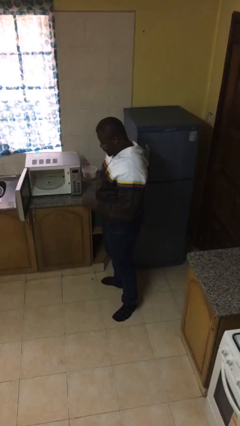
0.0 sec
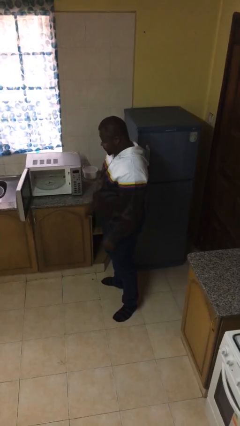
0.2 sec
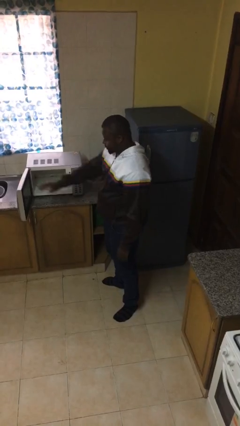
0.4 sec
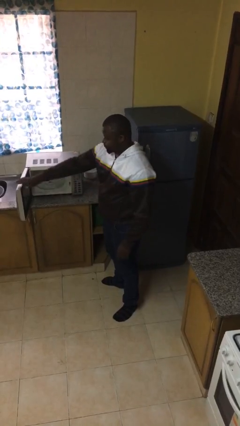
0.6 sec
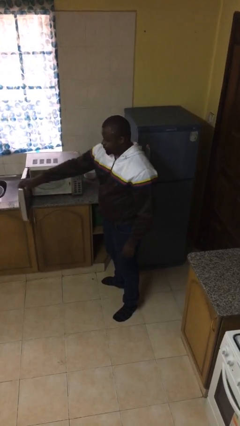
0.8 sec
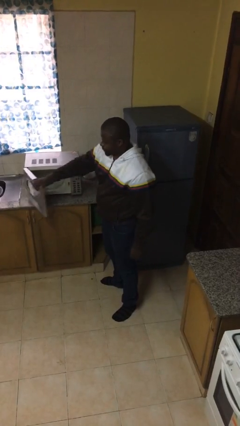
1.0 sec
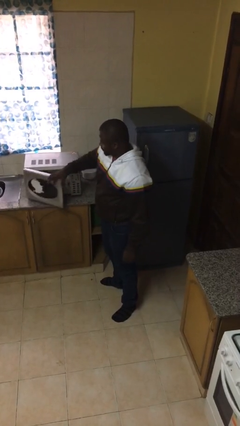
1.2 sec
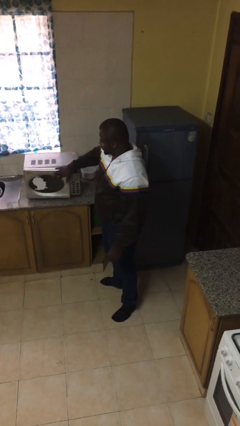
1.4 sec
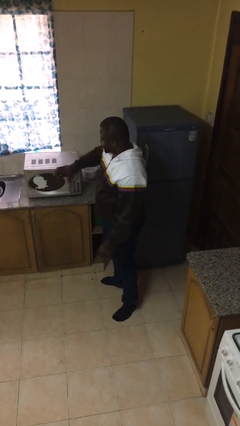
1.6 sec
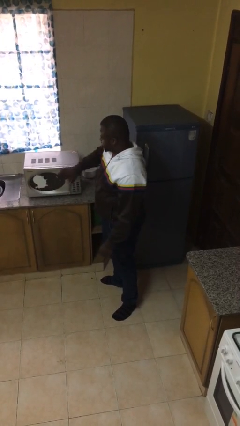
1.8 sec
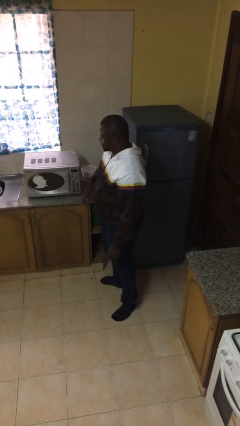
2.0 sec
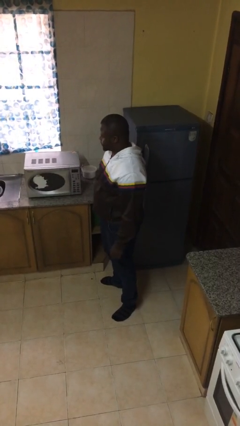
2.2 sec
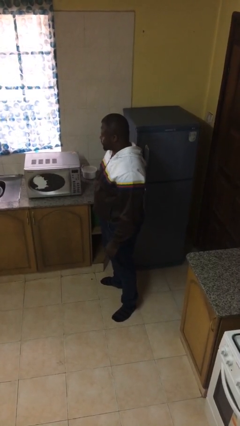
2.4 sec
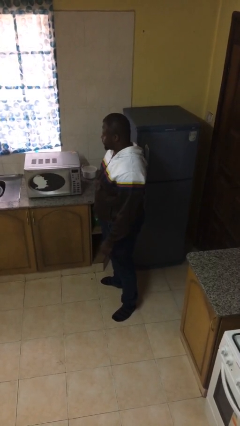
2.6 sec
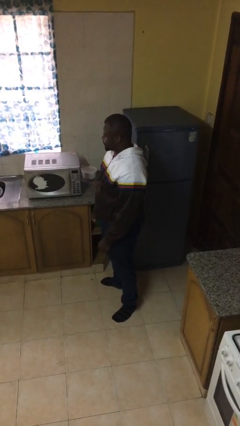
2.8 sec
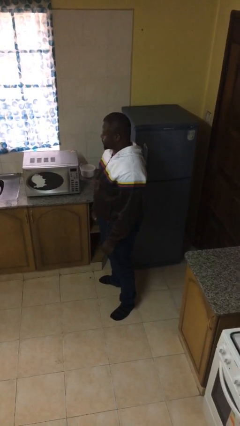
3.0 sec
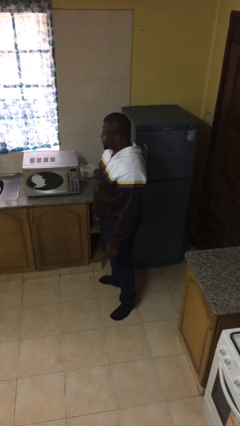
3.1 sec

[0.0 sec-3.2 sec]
person closes microwave

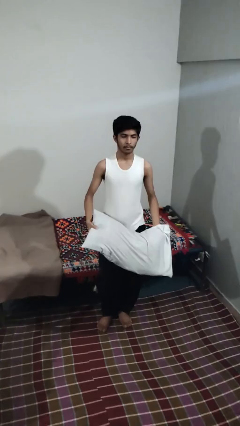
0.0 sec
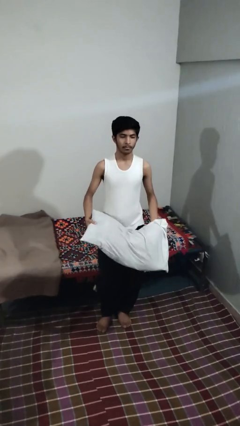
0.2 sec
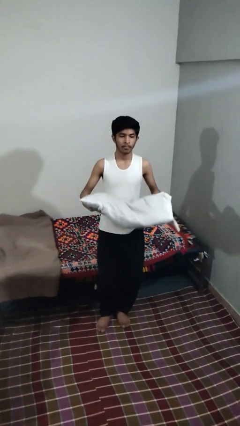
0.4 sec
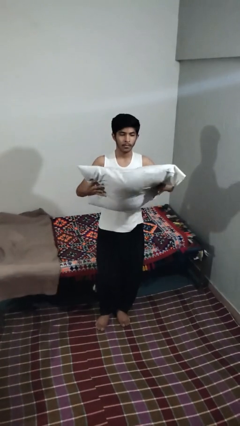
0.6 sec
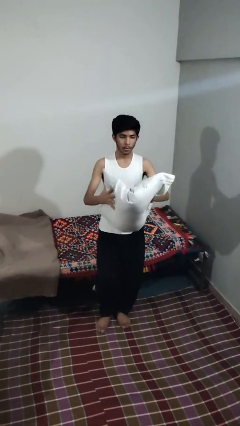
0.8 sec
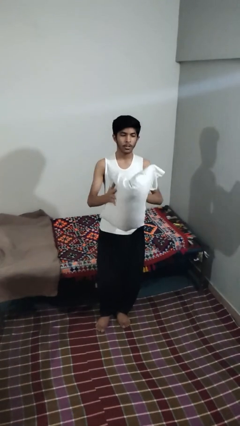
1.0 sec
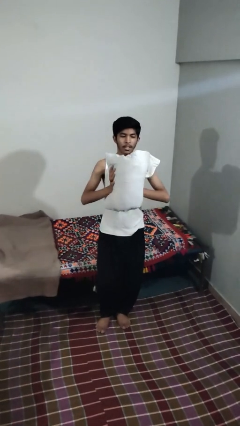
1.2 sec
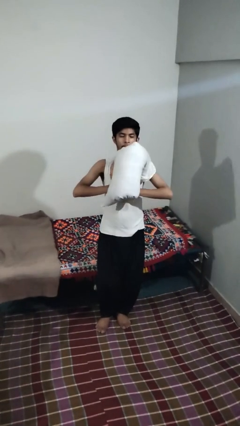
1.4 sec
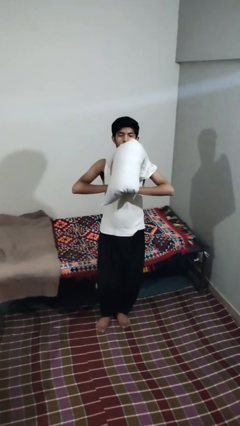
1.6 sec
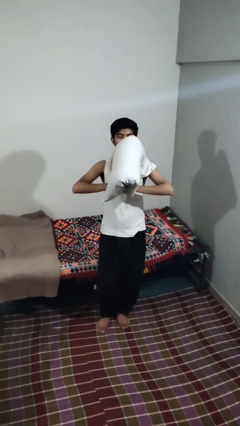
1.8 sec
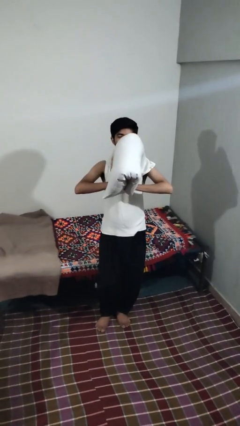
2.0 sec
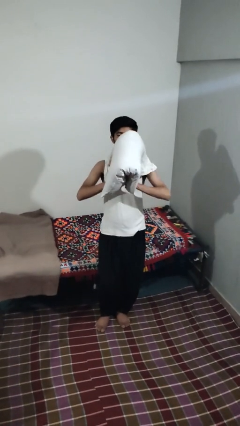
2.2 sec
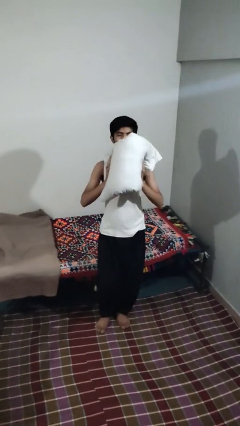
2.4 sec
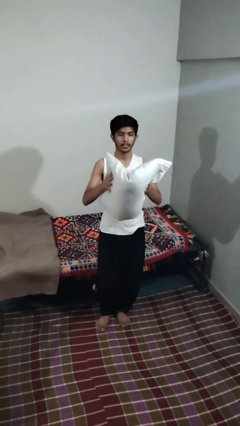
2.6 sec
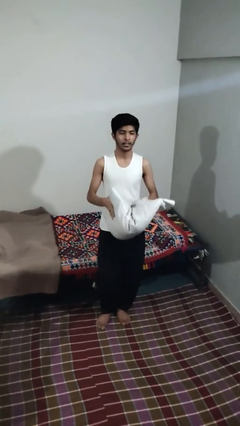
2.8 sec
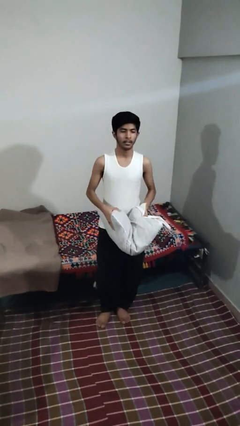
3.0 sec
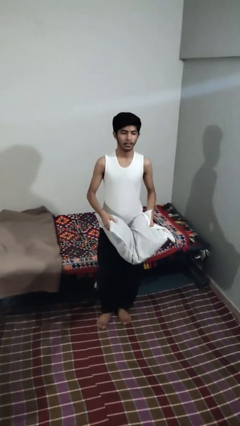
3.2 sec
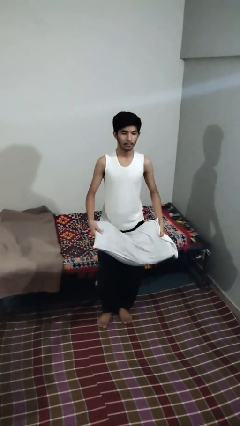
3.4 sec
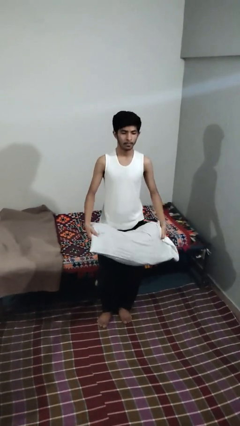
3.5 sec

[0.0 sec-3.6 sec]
person squeezes object

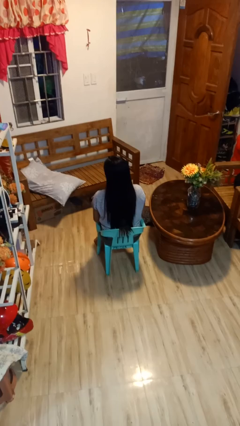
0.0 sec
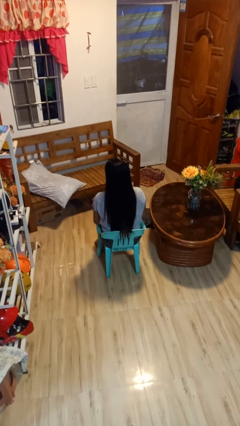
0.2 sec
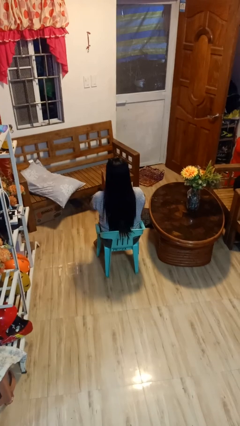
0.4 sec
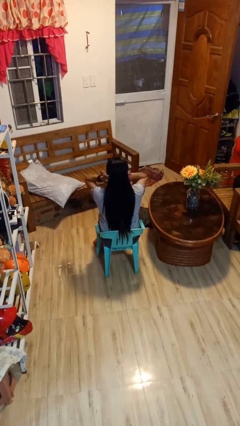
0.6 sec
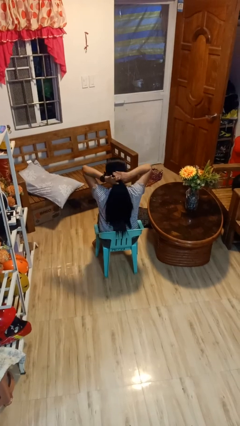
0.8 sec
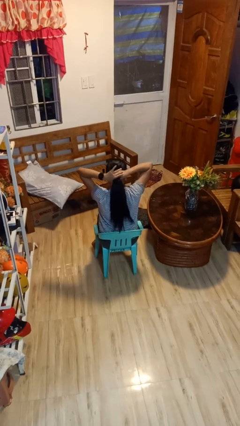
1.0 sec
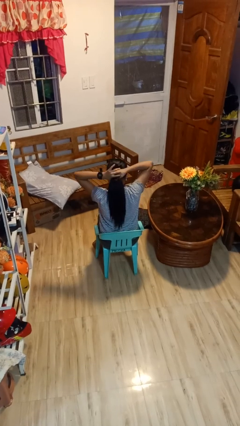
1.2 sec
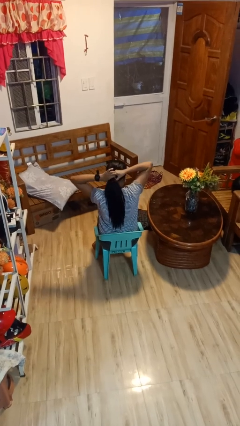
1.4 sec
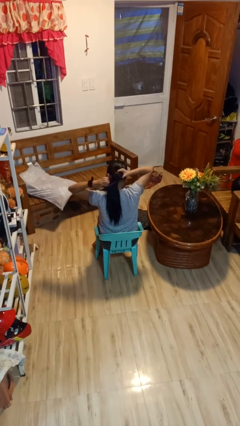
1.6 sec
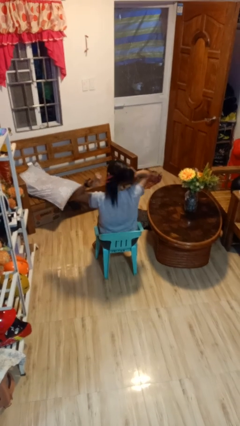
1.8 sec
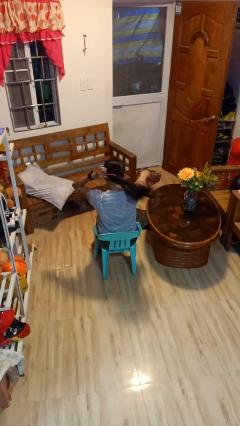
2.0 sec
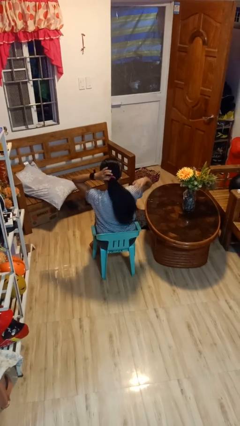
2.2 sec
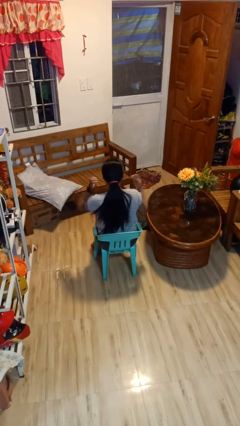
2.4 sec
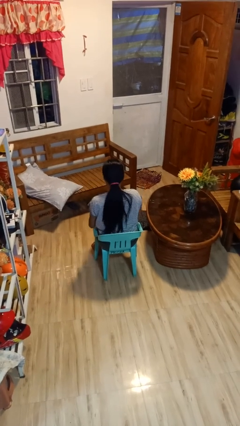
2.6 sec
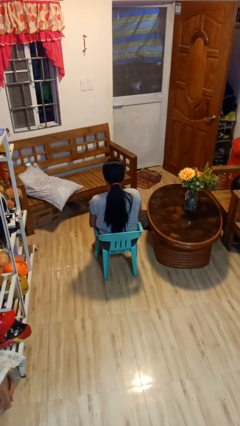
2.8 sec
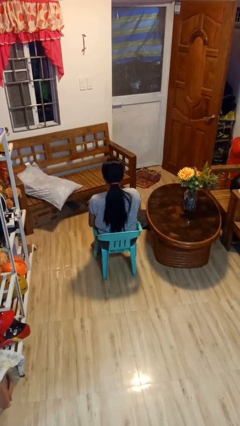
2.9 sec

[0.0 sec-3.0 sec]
person puts hair in ponytail

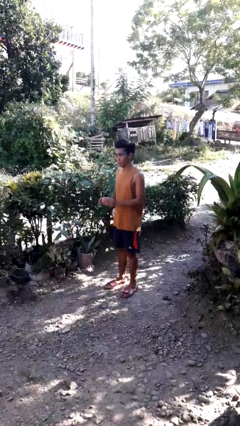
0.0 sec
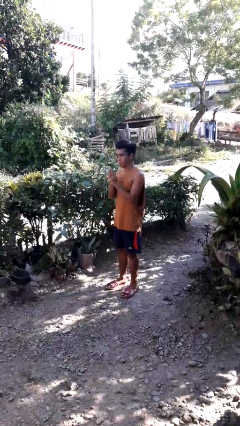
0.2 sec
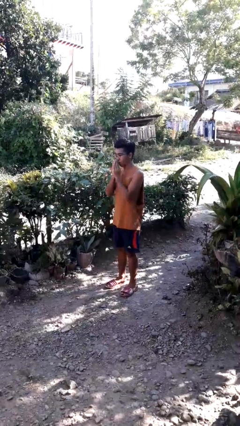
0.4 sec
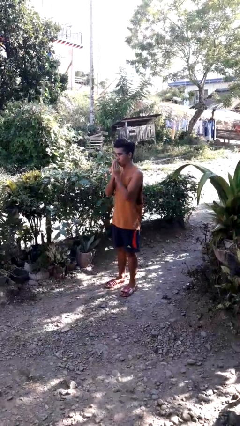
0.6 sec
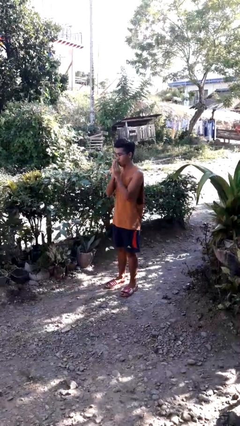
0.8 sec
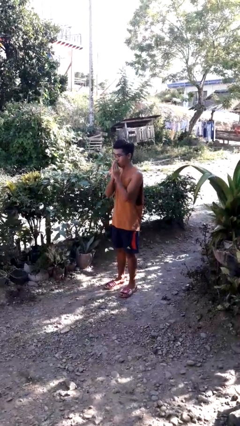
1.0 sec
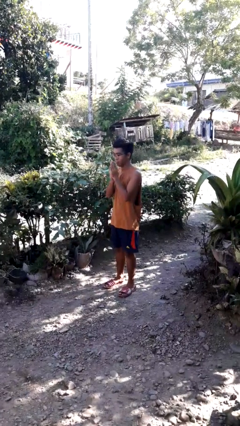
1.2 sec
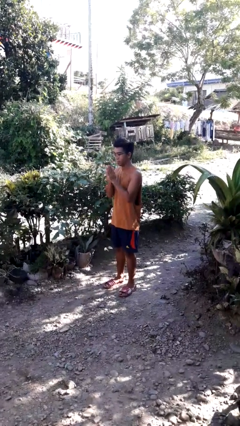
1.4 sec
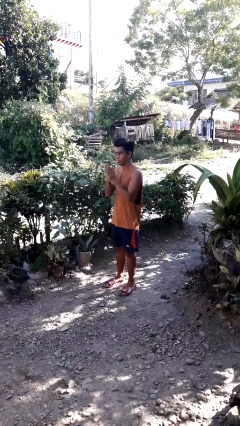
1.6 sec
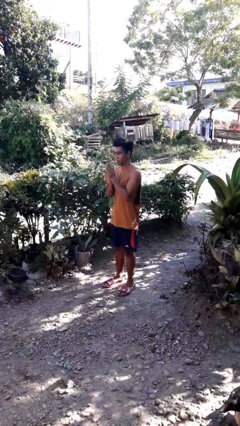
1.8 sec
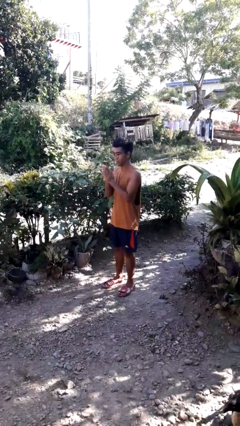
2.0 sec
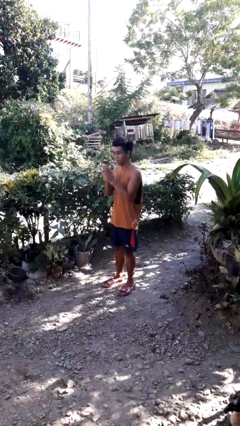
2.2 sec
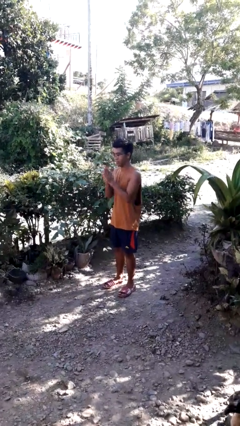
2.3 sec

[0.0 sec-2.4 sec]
person blows into hands

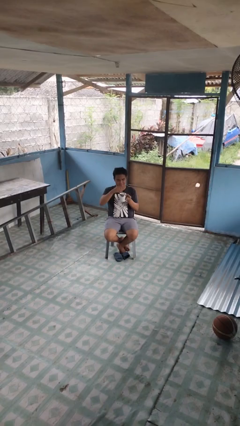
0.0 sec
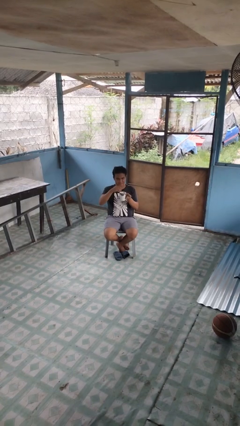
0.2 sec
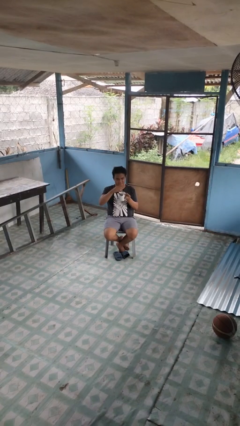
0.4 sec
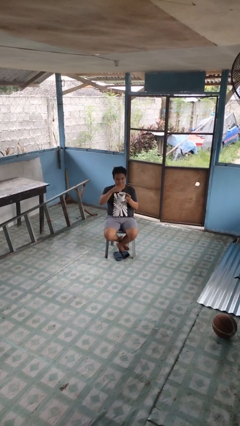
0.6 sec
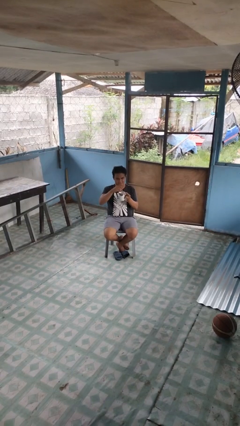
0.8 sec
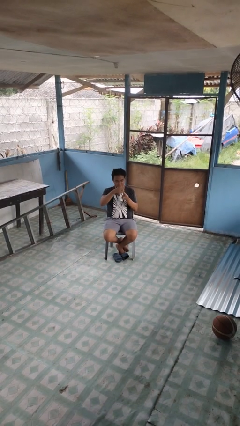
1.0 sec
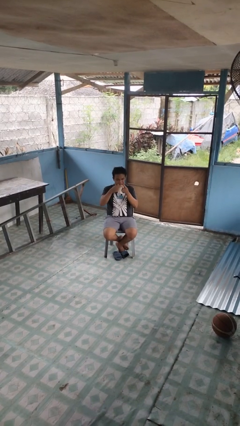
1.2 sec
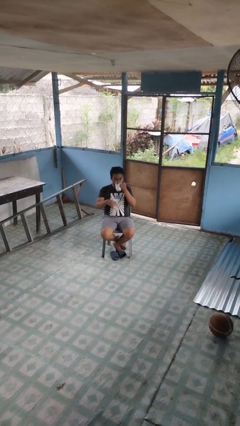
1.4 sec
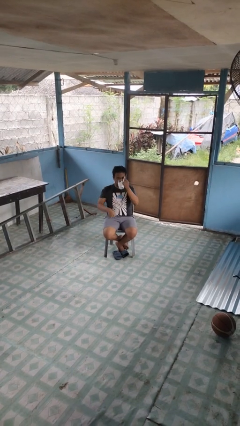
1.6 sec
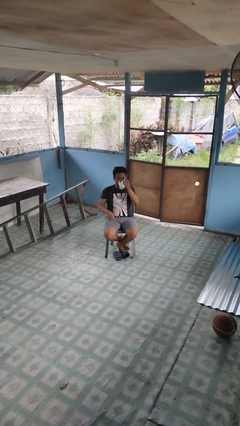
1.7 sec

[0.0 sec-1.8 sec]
person stirs mug

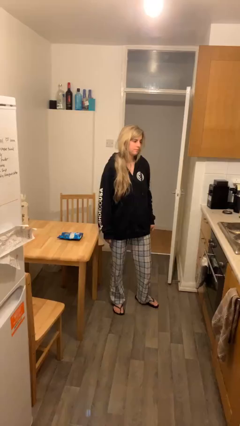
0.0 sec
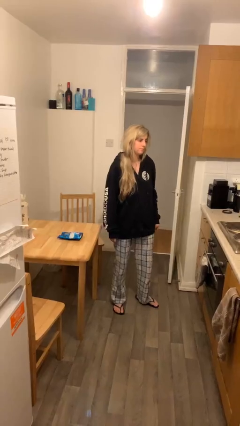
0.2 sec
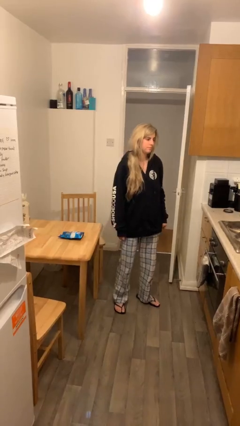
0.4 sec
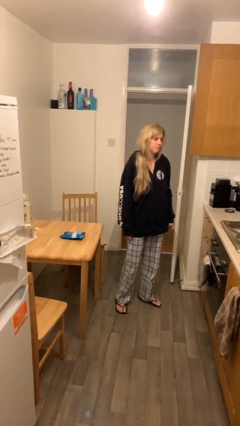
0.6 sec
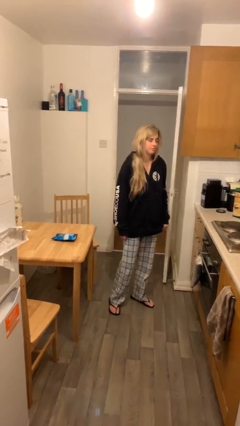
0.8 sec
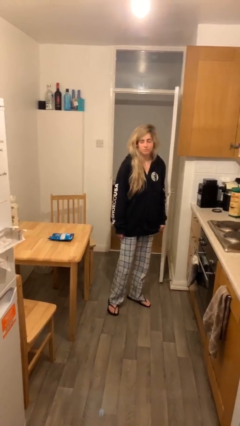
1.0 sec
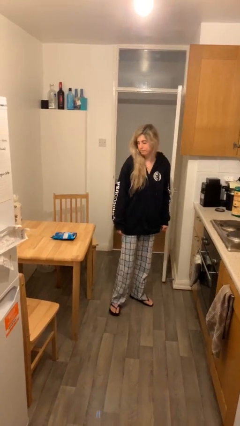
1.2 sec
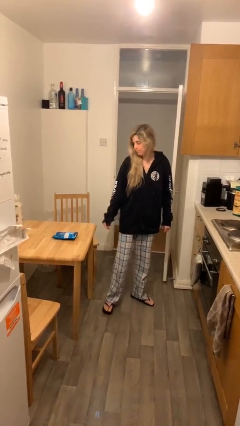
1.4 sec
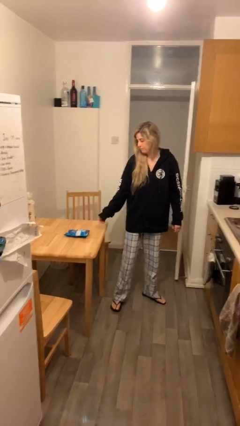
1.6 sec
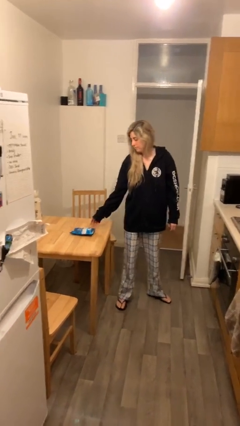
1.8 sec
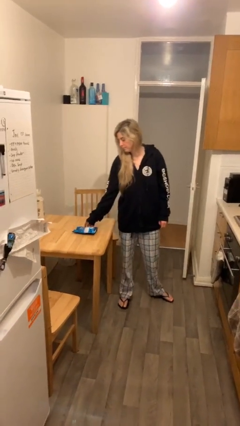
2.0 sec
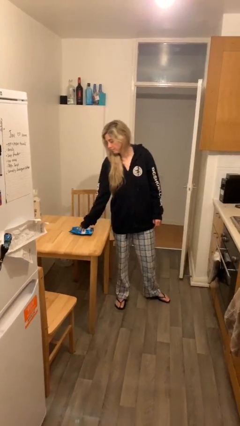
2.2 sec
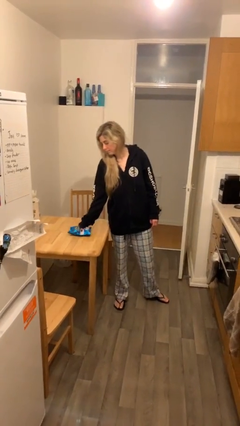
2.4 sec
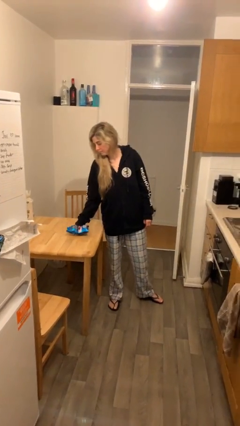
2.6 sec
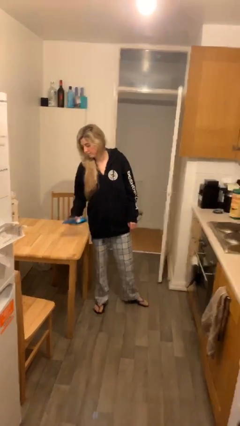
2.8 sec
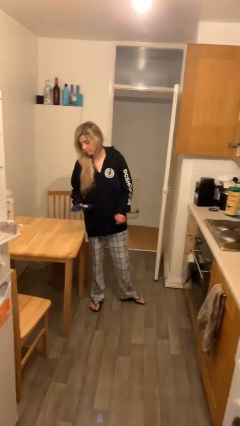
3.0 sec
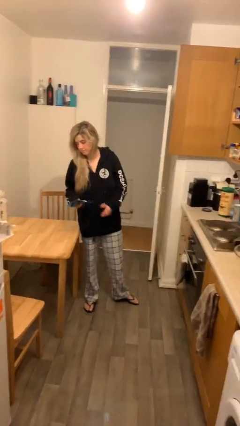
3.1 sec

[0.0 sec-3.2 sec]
person picks up object from table
